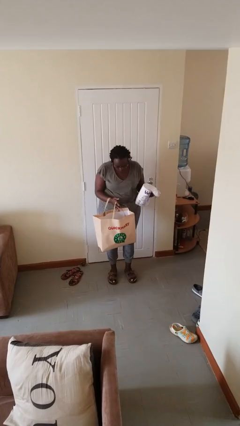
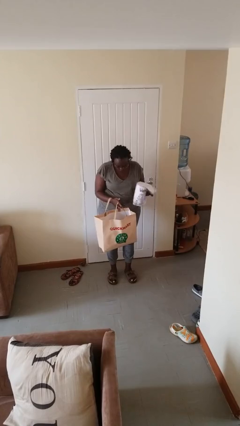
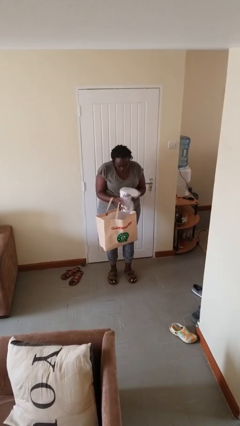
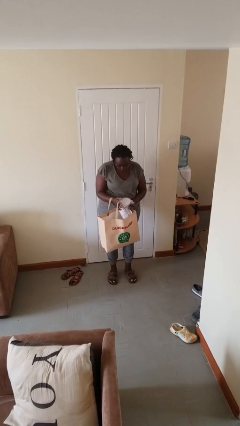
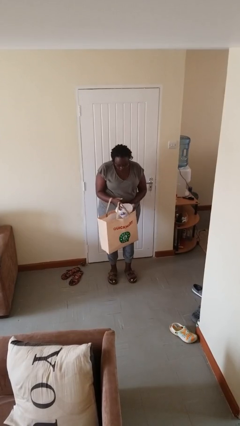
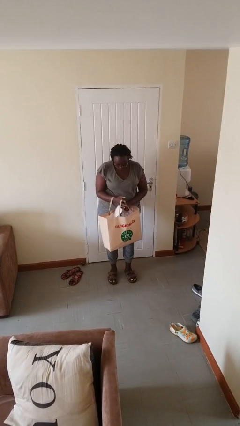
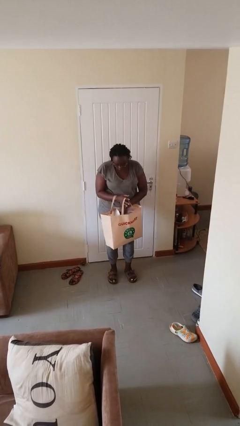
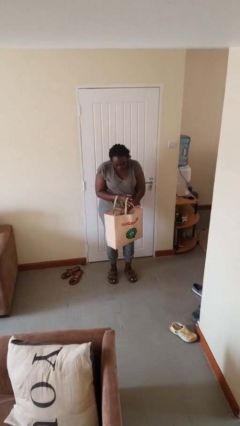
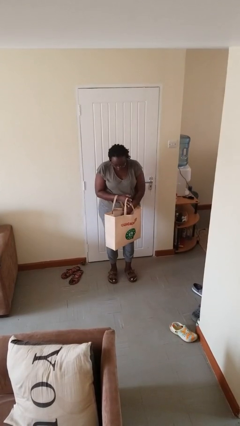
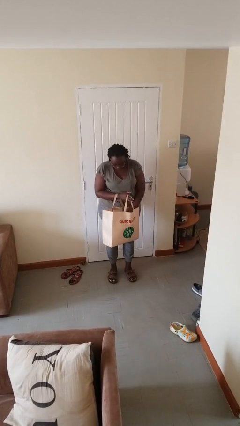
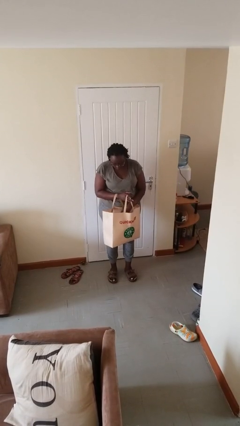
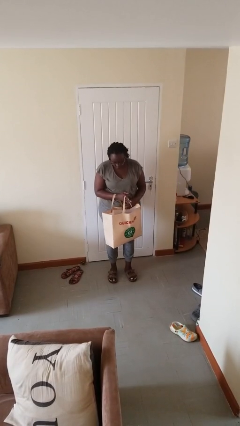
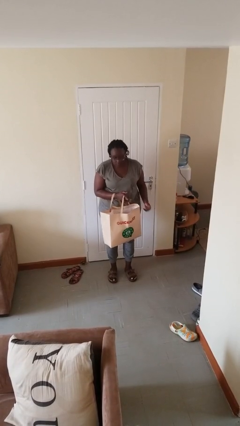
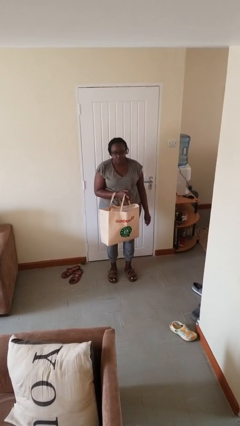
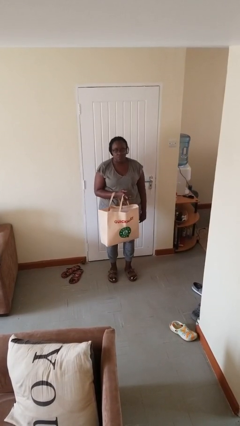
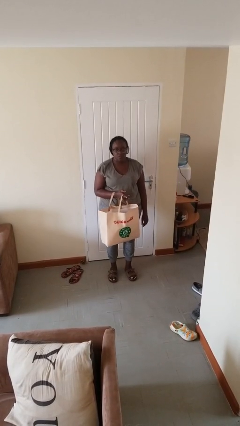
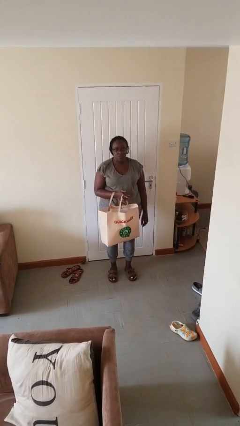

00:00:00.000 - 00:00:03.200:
person puts object into bag

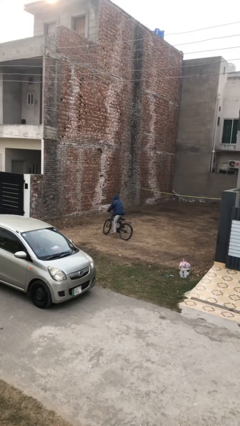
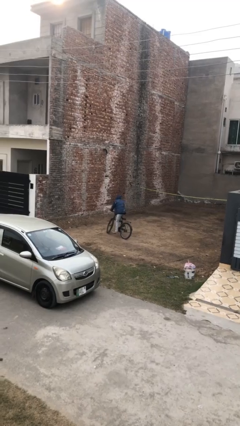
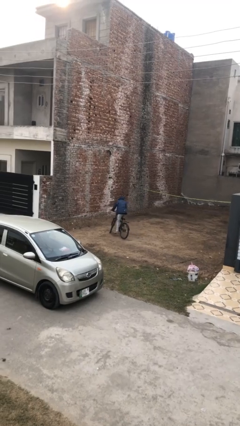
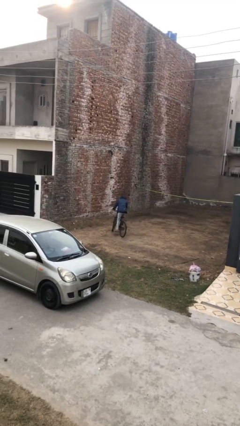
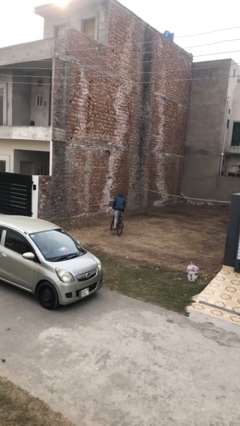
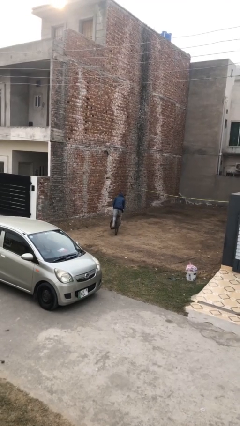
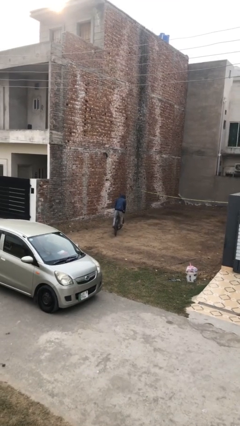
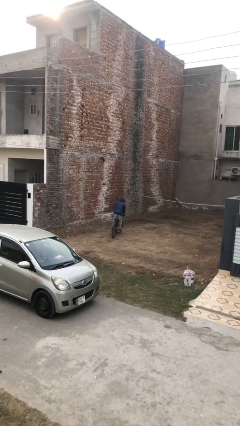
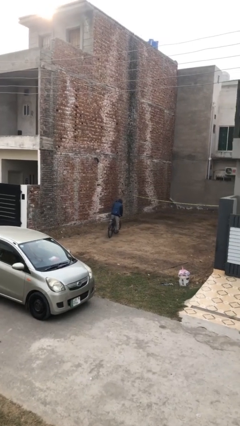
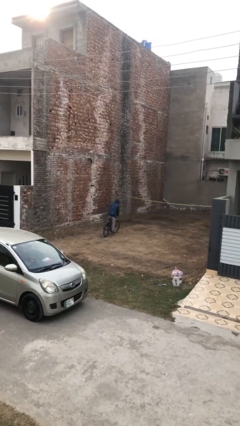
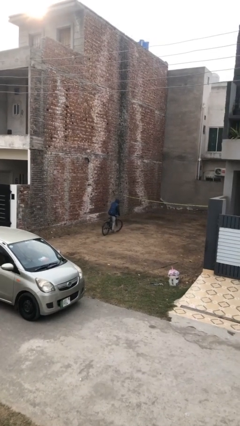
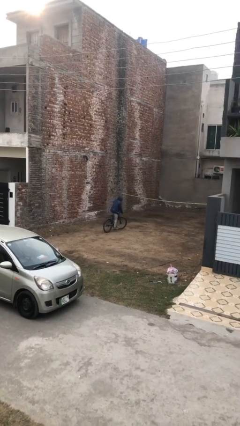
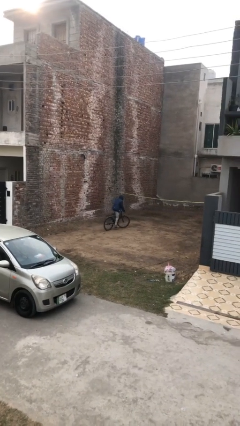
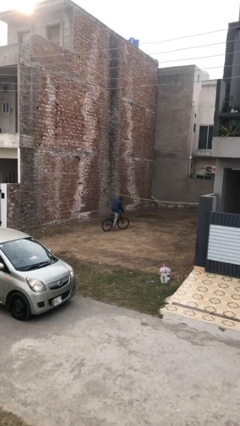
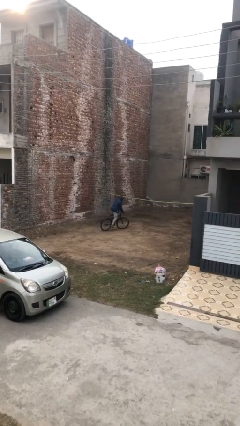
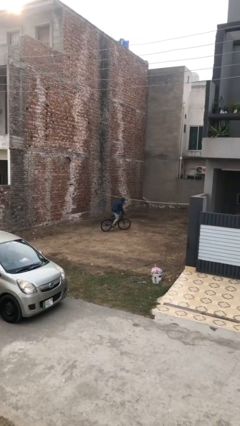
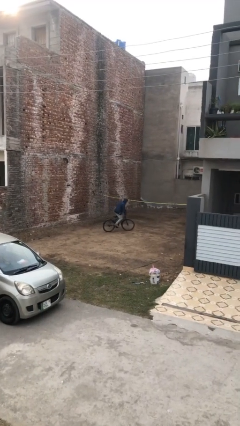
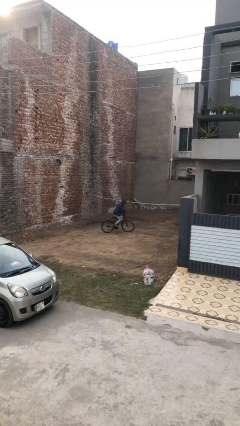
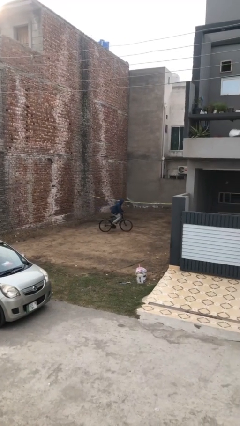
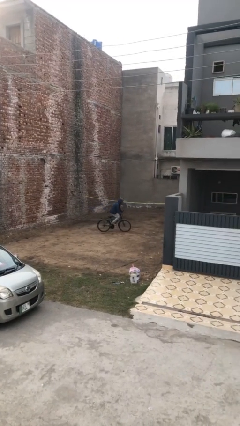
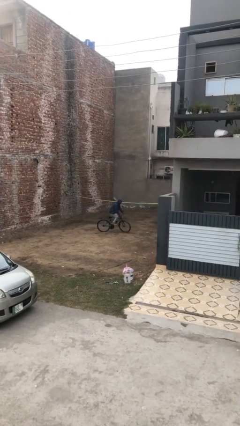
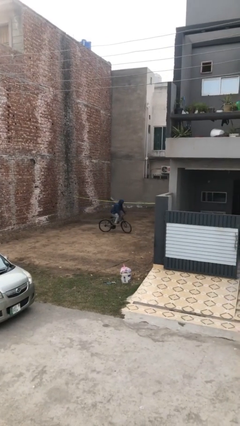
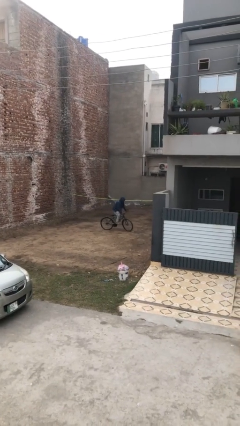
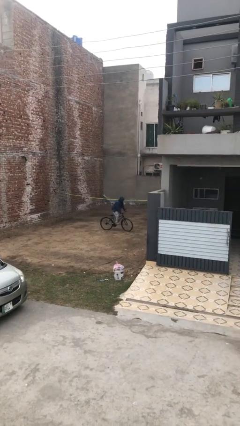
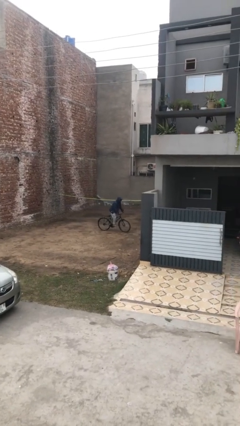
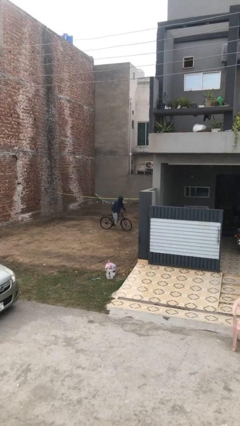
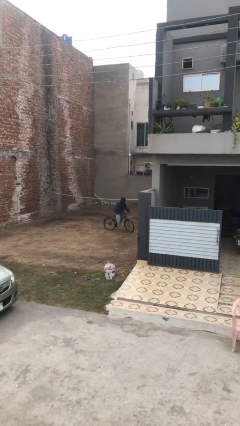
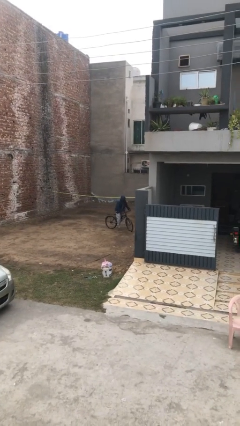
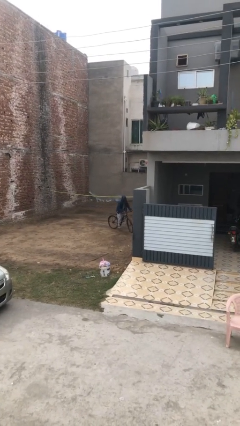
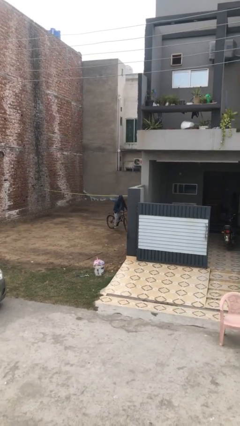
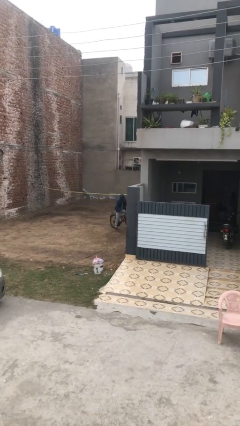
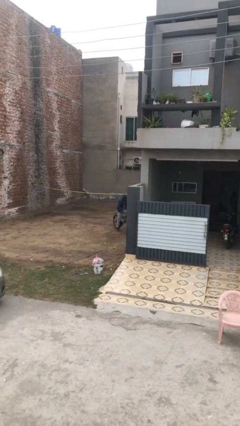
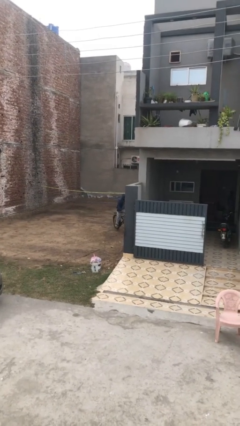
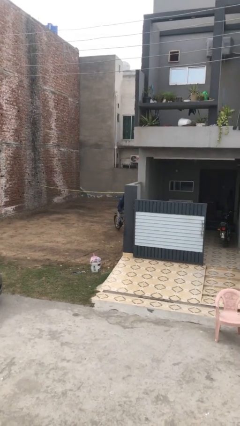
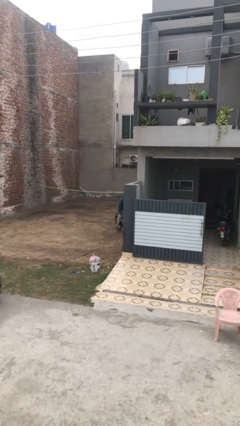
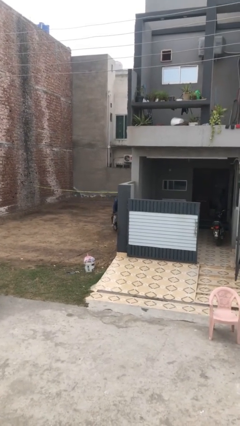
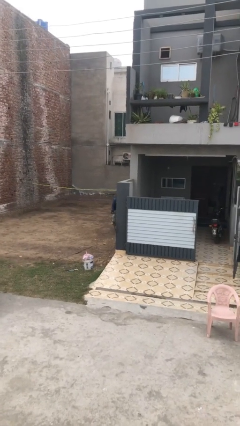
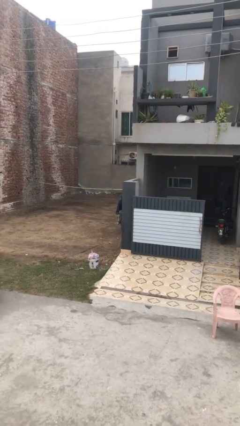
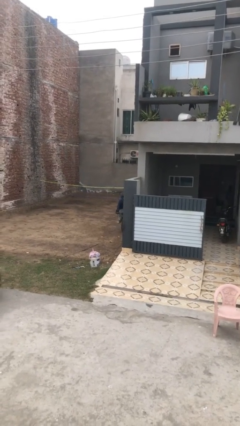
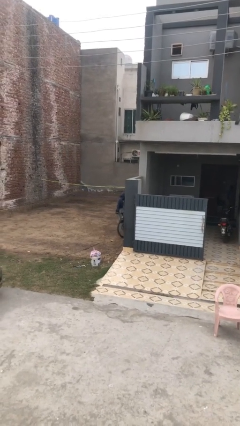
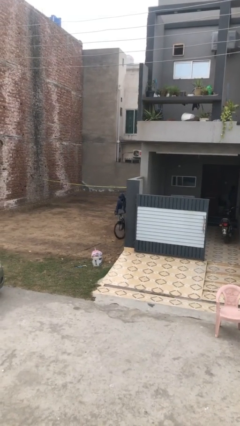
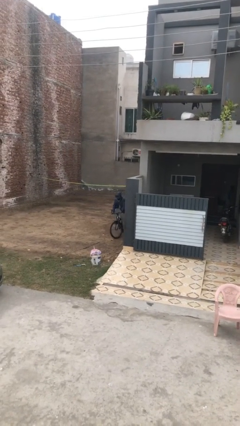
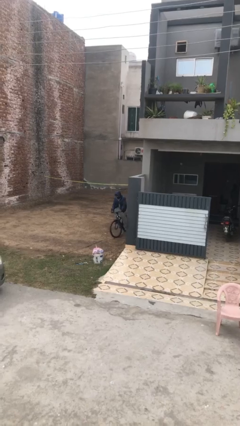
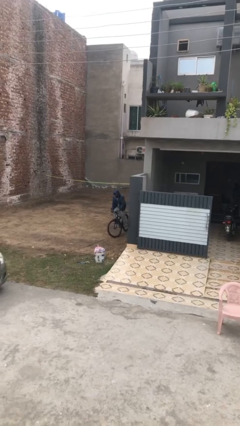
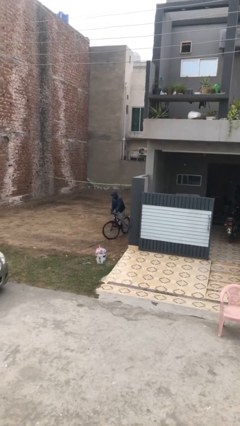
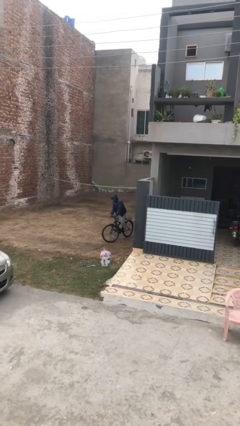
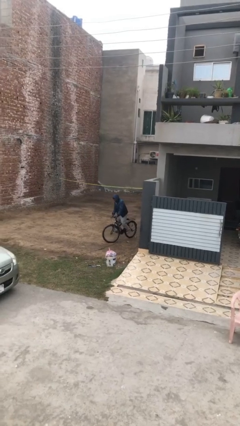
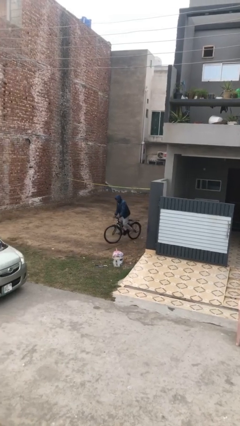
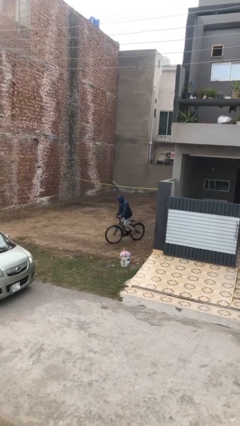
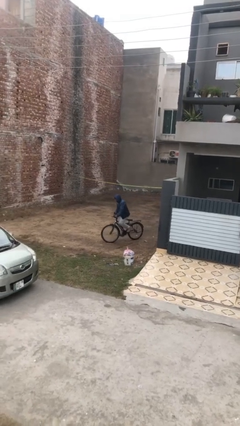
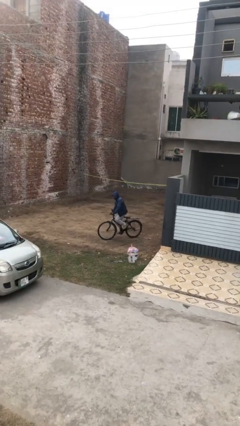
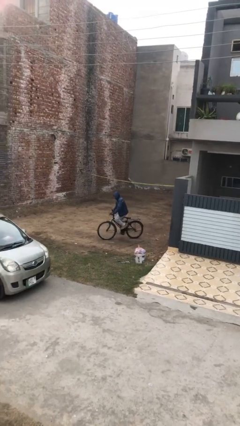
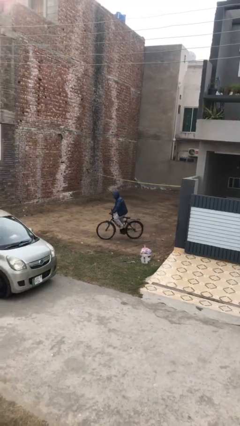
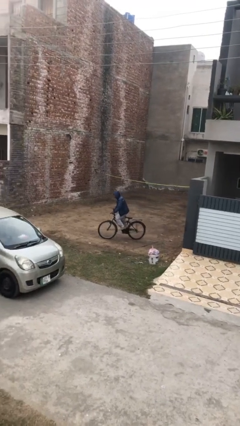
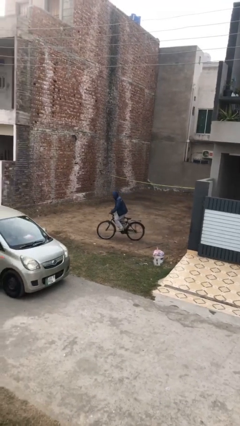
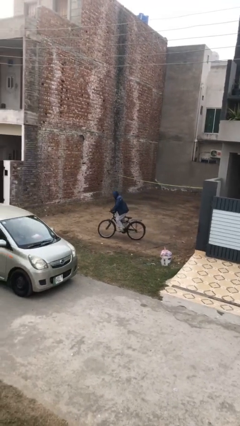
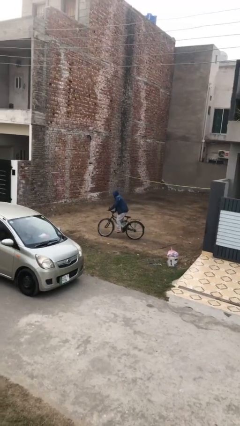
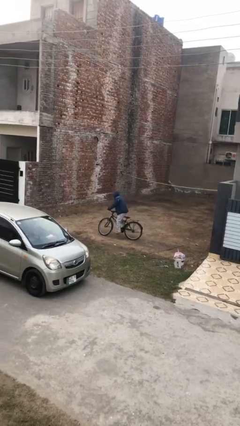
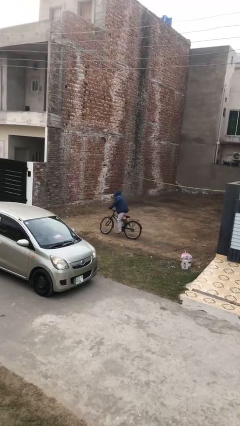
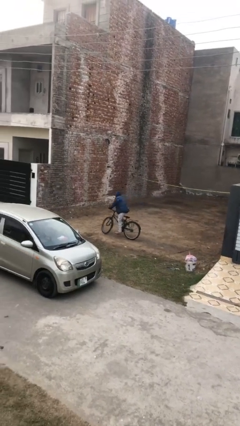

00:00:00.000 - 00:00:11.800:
person rides bicycle

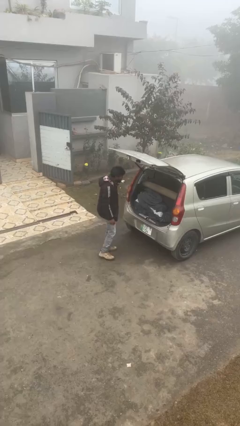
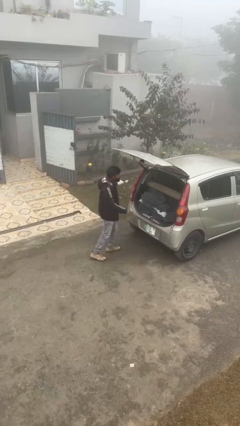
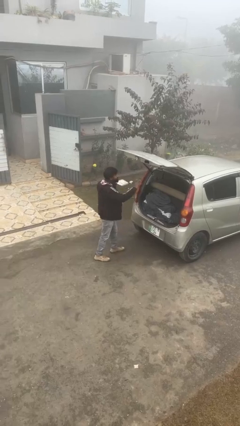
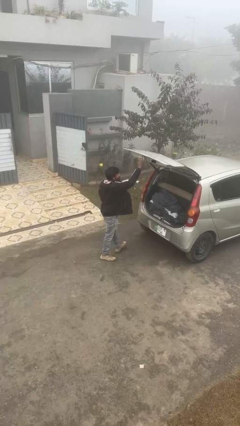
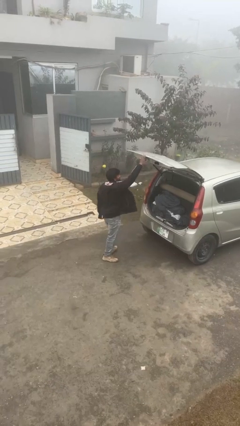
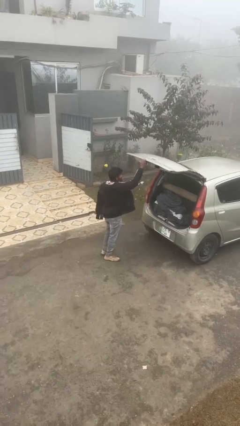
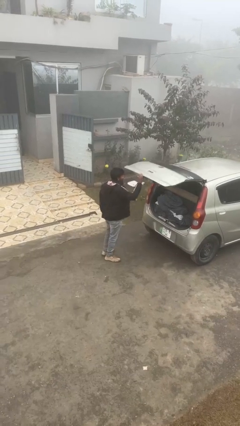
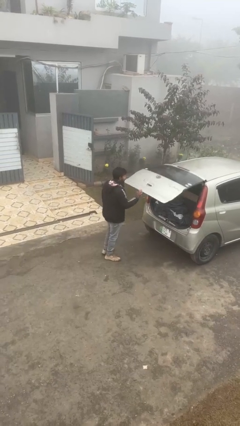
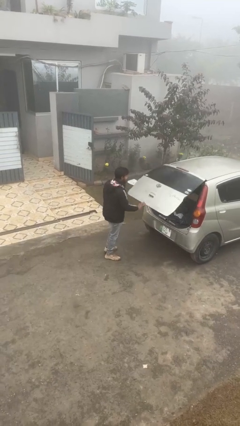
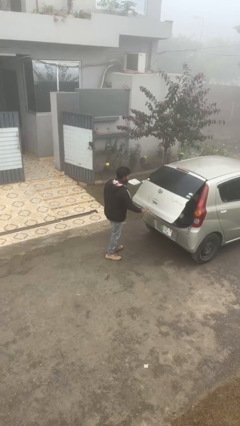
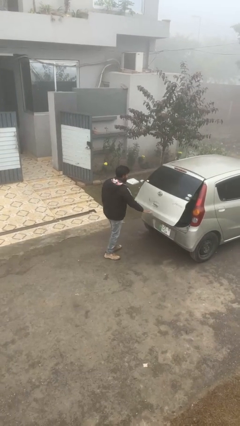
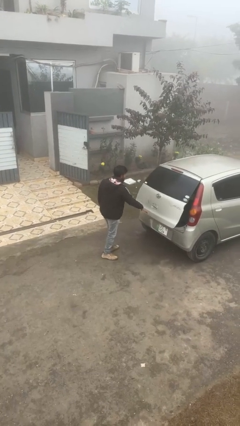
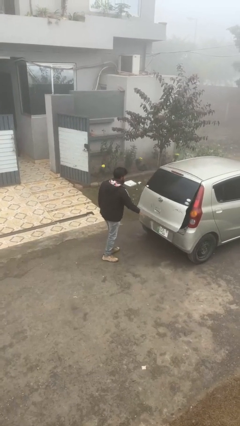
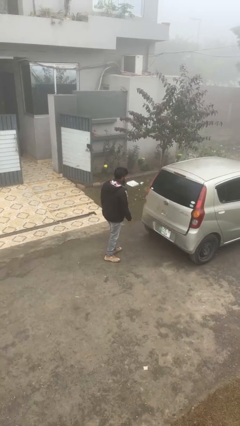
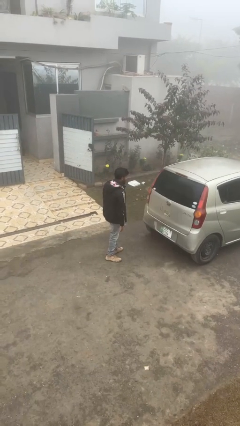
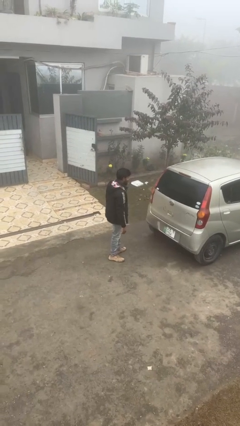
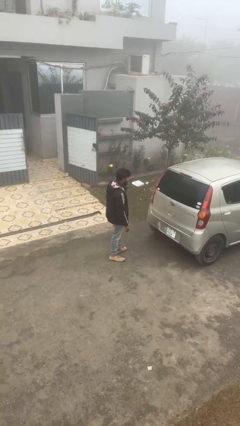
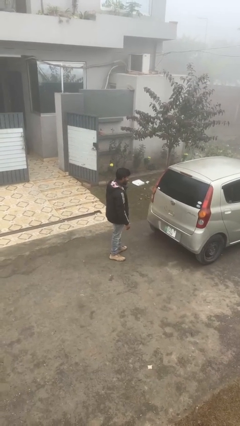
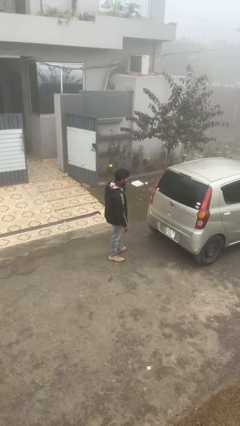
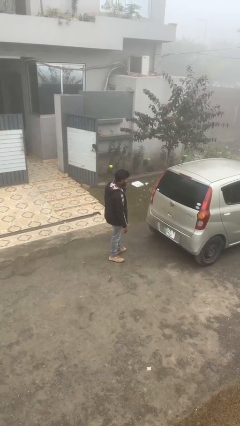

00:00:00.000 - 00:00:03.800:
person closes car trunk
